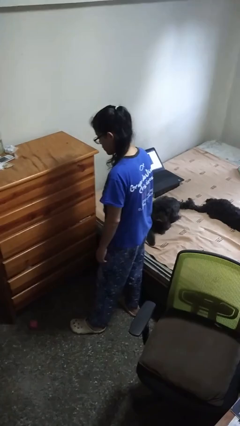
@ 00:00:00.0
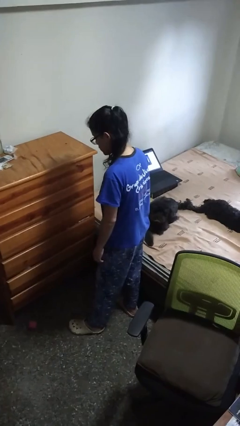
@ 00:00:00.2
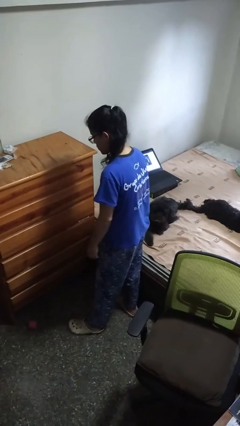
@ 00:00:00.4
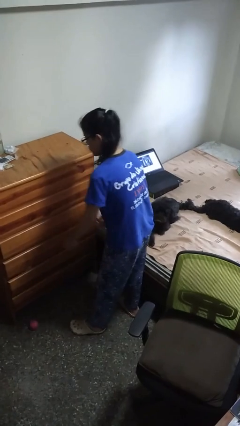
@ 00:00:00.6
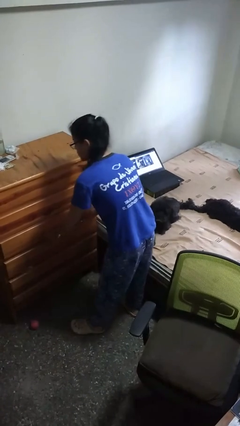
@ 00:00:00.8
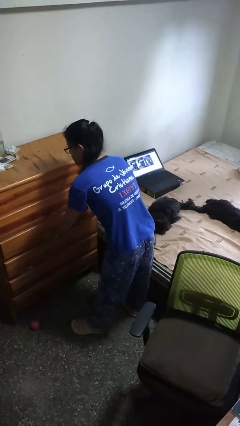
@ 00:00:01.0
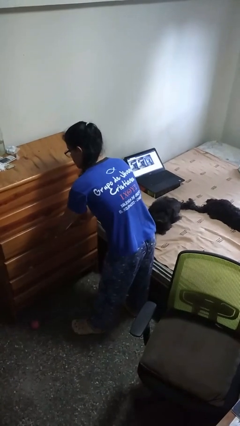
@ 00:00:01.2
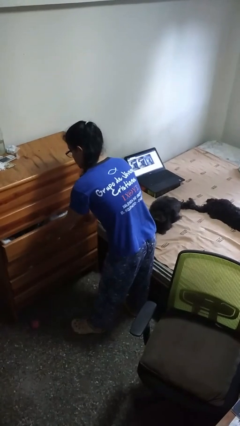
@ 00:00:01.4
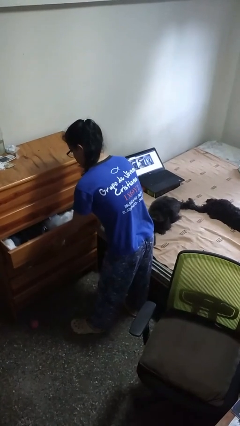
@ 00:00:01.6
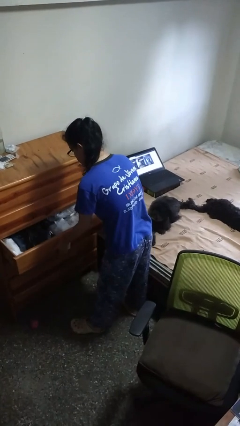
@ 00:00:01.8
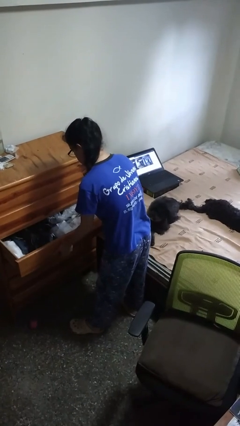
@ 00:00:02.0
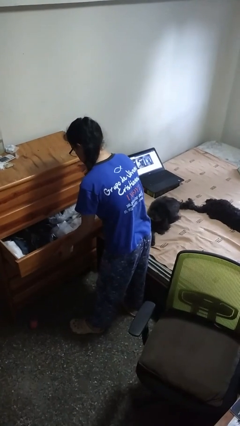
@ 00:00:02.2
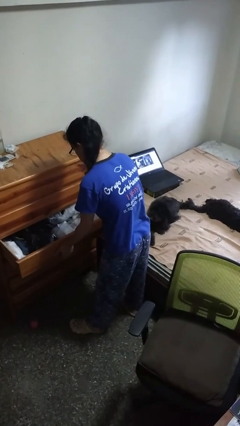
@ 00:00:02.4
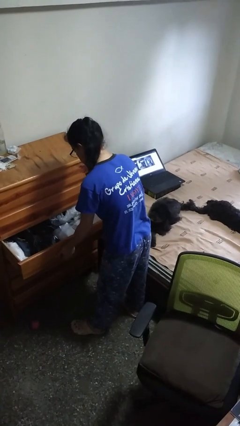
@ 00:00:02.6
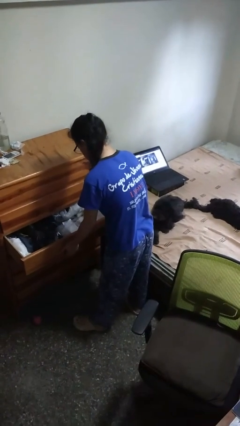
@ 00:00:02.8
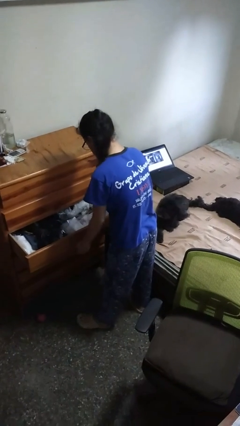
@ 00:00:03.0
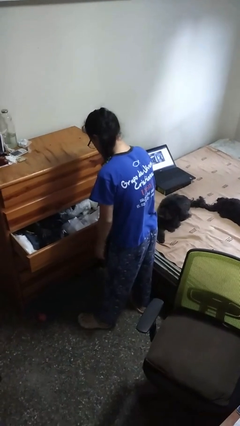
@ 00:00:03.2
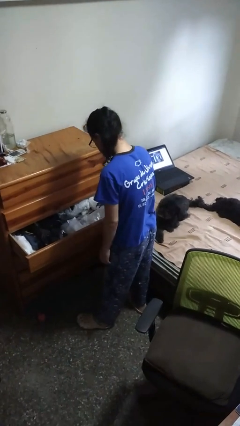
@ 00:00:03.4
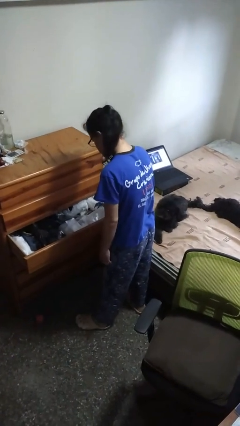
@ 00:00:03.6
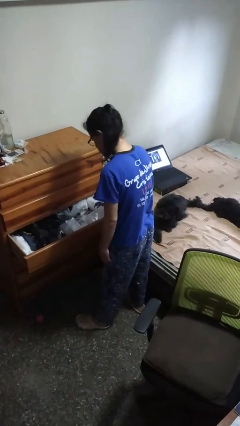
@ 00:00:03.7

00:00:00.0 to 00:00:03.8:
person opens dresser drawer

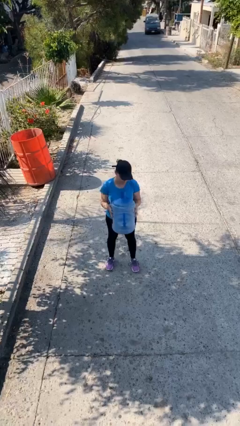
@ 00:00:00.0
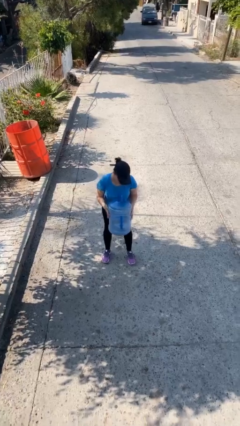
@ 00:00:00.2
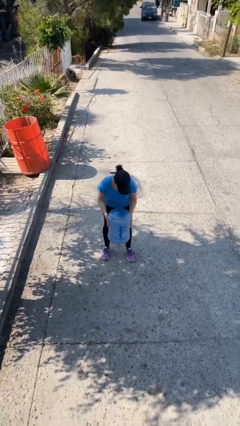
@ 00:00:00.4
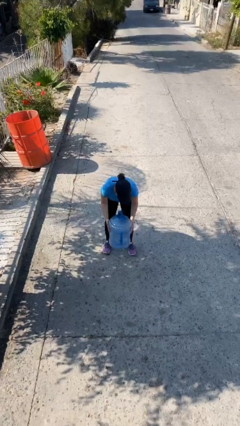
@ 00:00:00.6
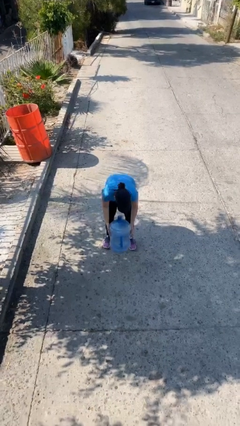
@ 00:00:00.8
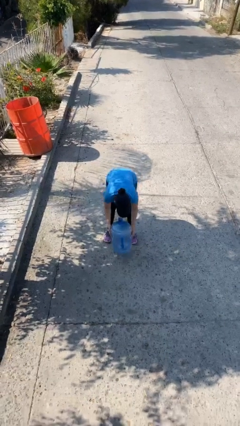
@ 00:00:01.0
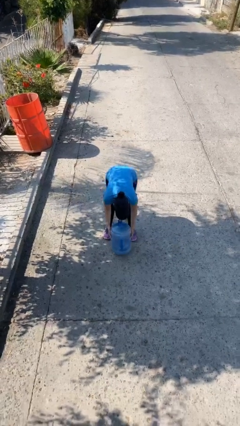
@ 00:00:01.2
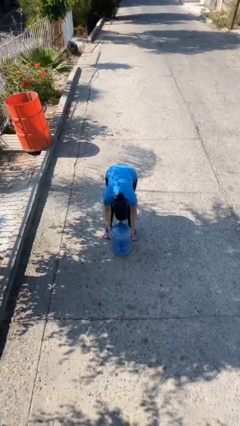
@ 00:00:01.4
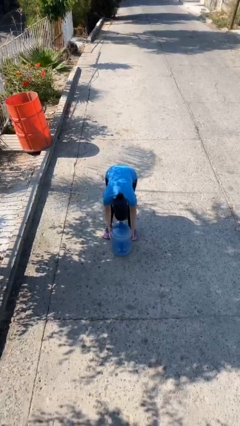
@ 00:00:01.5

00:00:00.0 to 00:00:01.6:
person puts down object on floor

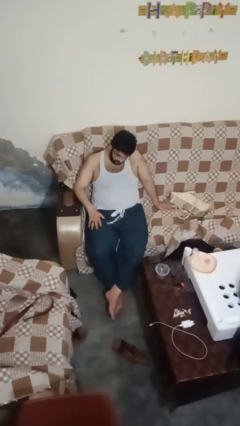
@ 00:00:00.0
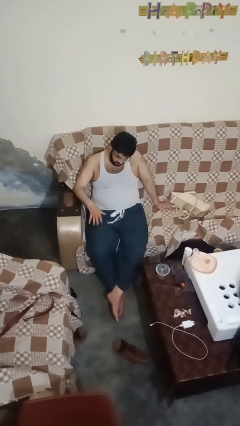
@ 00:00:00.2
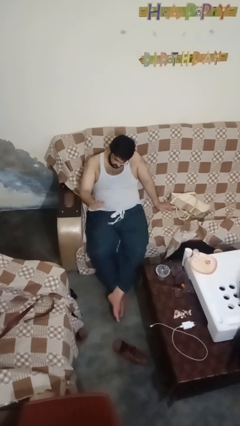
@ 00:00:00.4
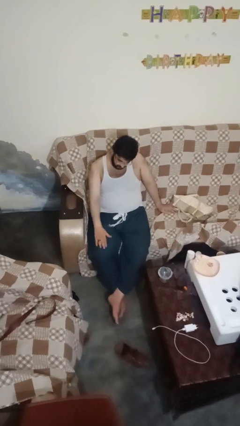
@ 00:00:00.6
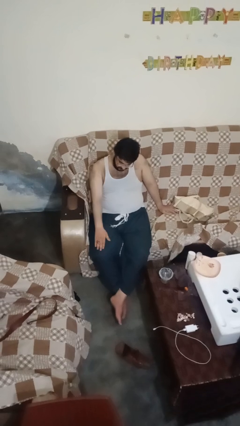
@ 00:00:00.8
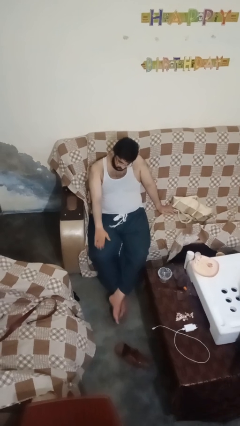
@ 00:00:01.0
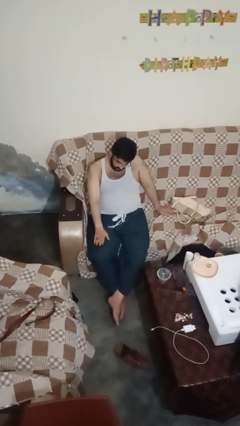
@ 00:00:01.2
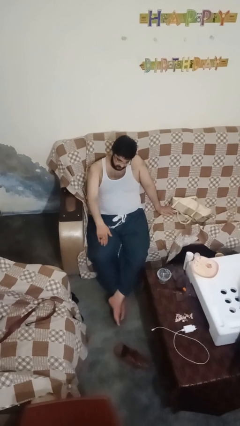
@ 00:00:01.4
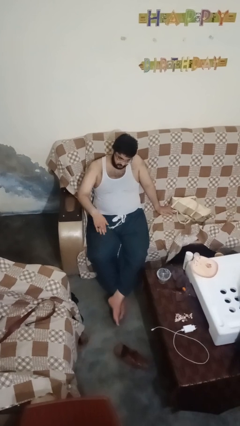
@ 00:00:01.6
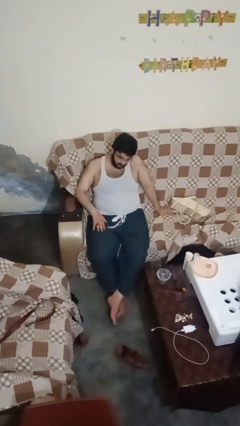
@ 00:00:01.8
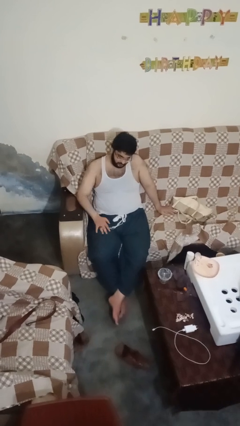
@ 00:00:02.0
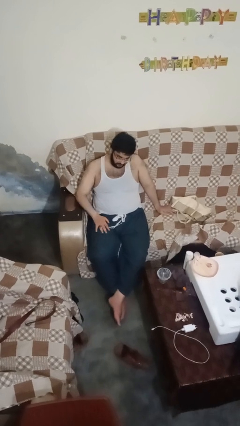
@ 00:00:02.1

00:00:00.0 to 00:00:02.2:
person slaps hands on thighs

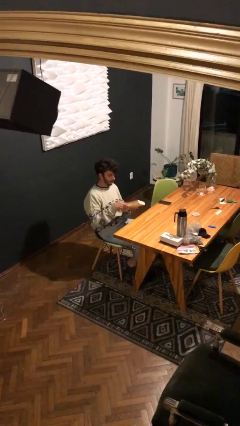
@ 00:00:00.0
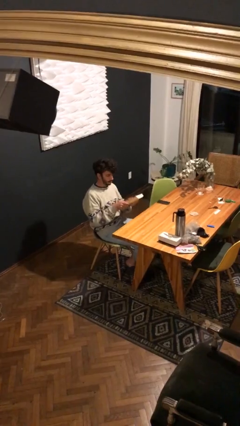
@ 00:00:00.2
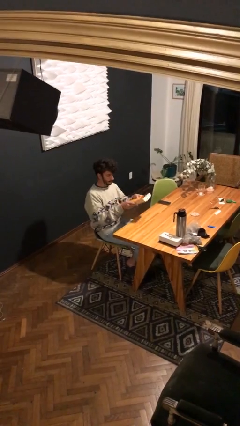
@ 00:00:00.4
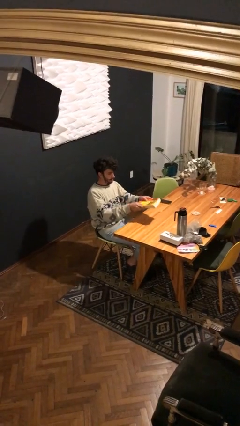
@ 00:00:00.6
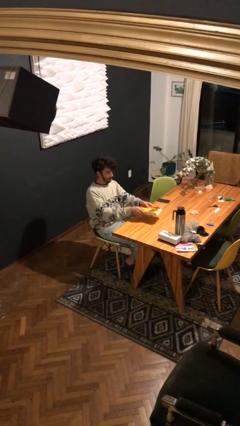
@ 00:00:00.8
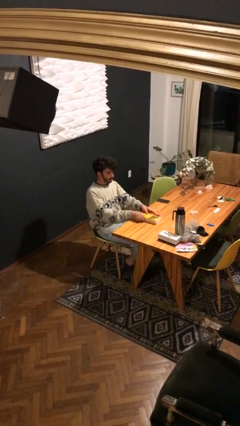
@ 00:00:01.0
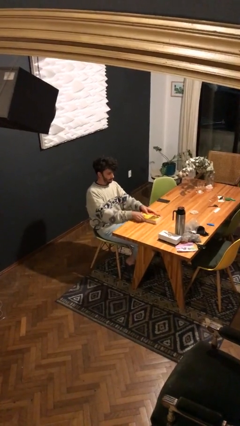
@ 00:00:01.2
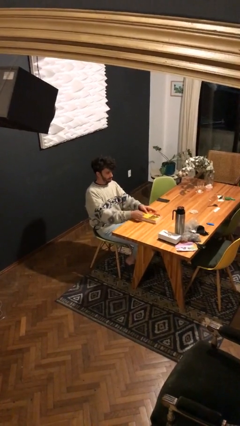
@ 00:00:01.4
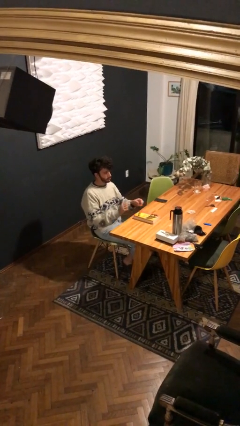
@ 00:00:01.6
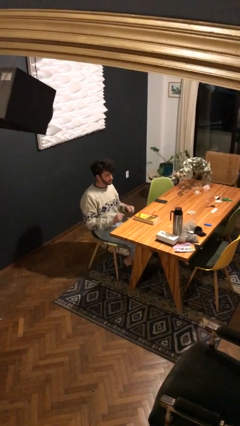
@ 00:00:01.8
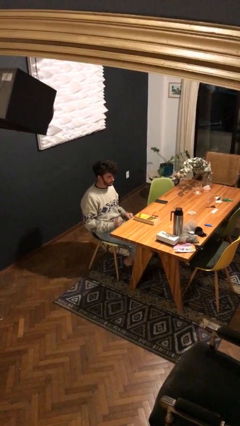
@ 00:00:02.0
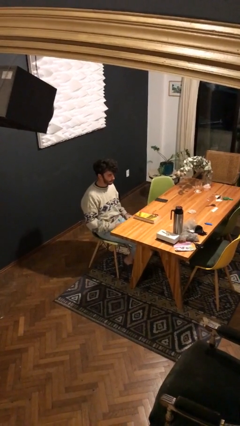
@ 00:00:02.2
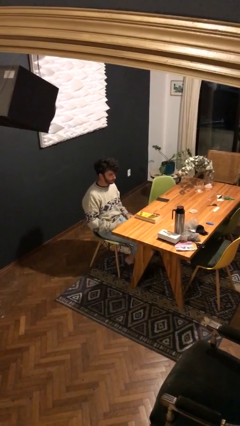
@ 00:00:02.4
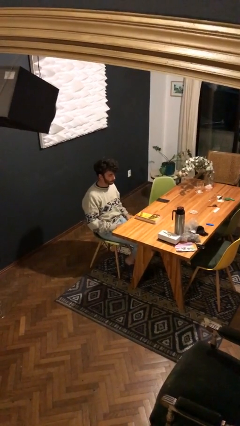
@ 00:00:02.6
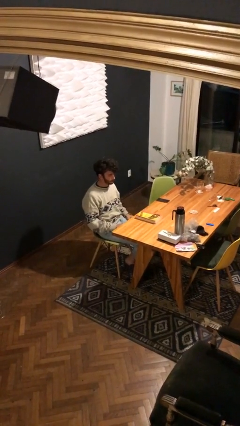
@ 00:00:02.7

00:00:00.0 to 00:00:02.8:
person puts down object on table

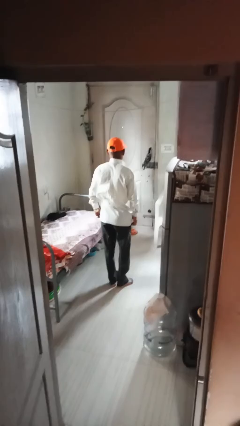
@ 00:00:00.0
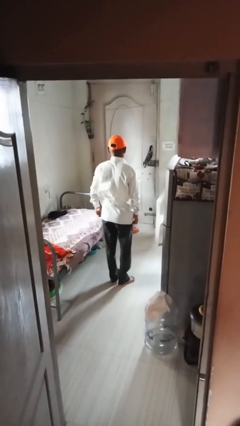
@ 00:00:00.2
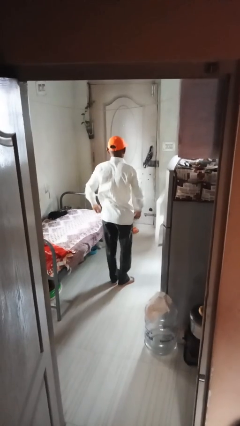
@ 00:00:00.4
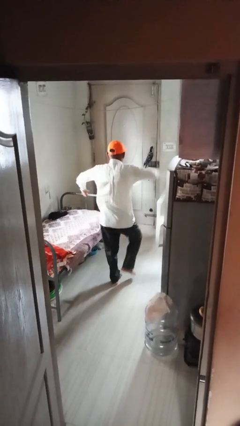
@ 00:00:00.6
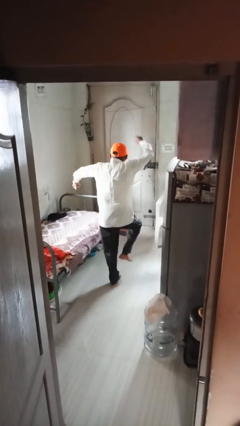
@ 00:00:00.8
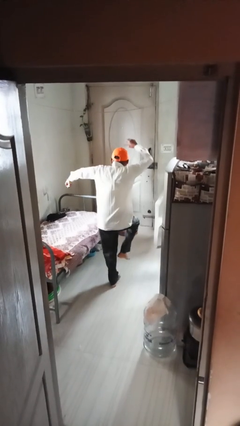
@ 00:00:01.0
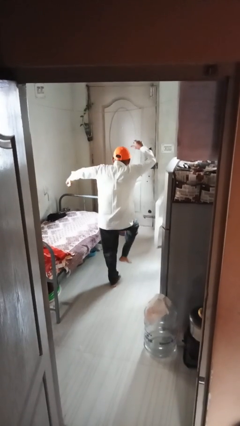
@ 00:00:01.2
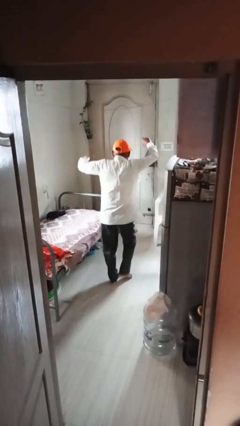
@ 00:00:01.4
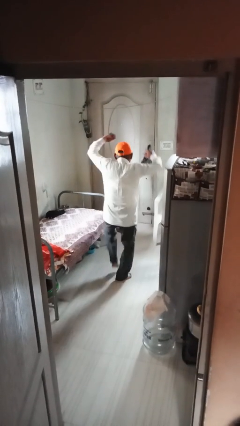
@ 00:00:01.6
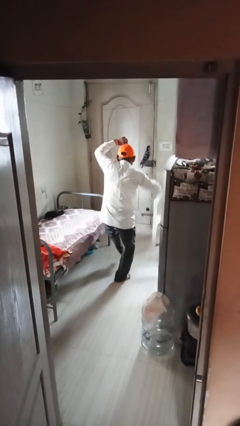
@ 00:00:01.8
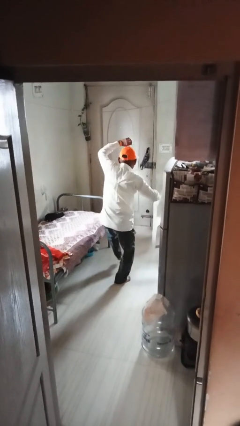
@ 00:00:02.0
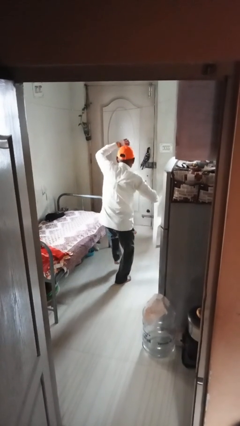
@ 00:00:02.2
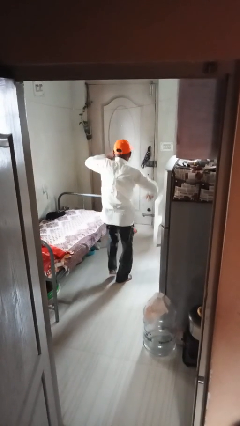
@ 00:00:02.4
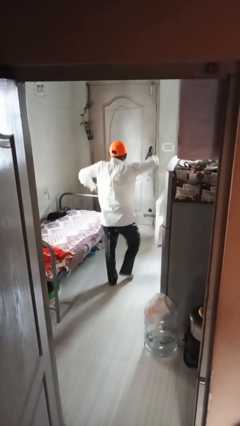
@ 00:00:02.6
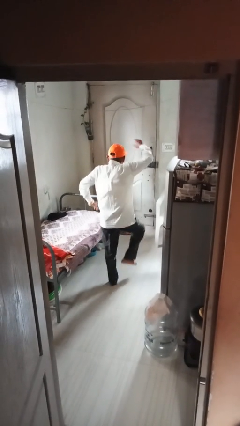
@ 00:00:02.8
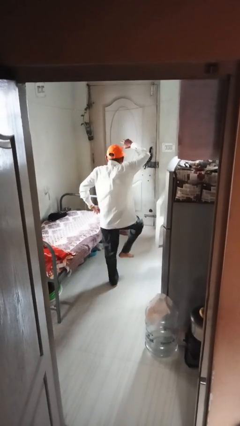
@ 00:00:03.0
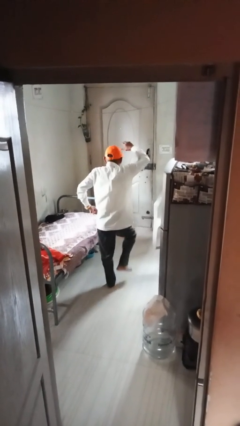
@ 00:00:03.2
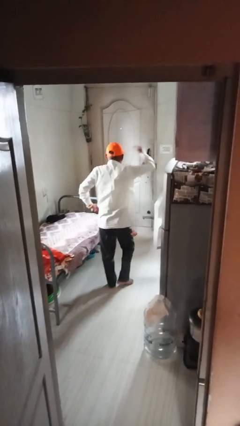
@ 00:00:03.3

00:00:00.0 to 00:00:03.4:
person dances in place

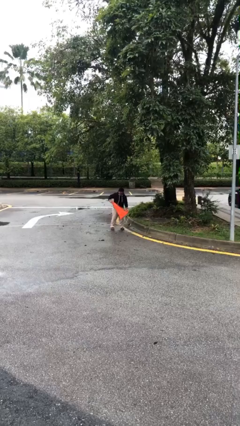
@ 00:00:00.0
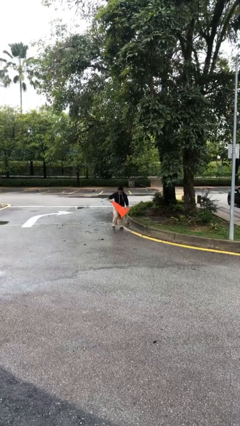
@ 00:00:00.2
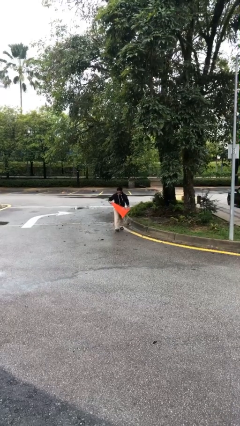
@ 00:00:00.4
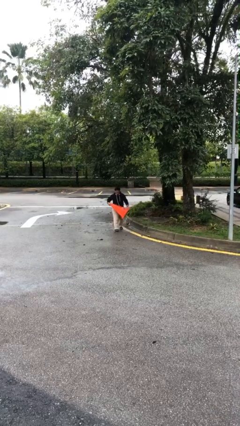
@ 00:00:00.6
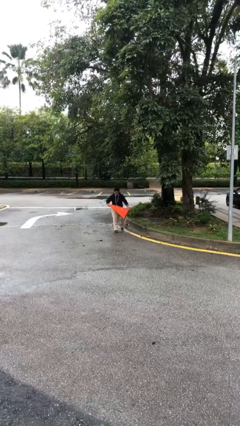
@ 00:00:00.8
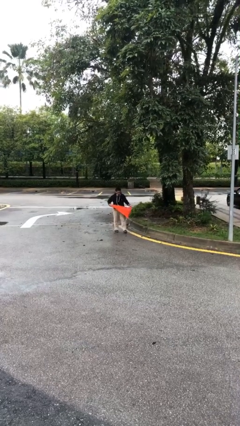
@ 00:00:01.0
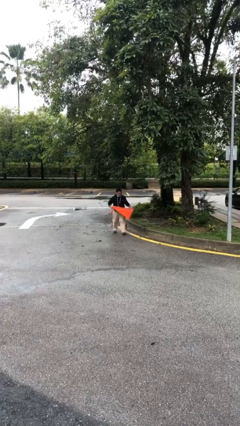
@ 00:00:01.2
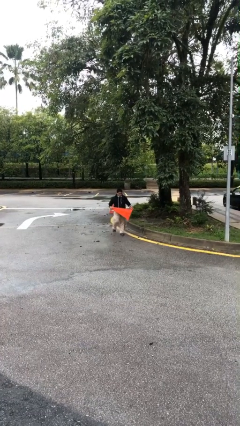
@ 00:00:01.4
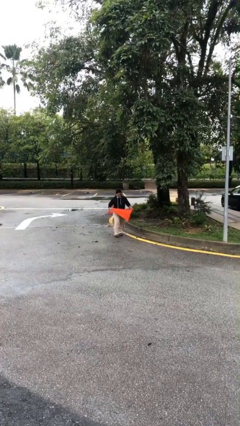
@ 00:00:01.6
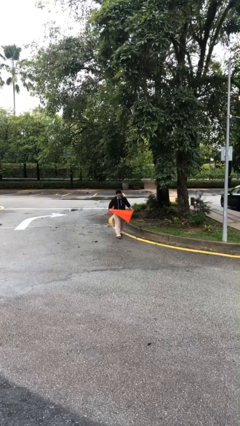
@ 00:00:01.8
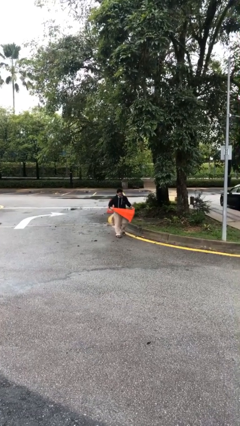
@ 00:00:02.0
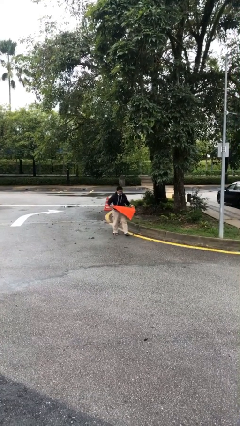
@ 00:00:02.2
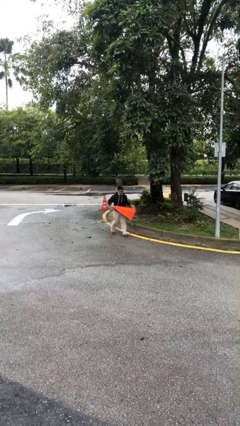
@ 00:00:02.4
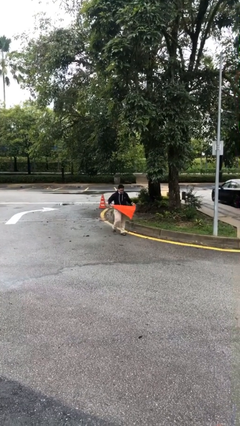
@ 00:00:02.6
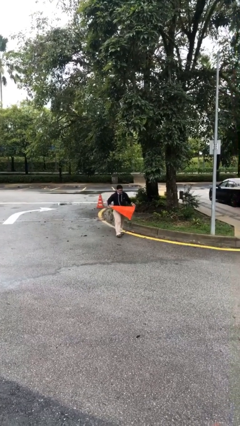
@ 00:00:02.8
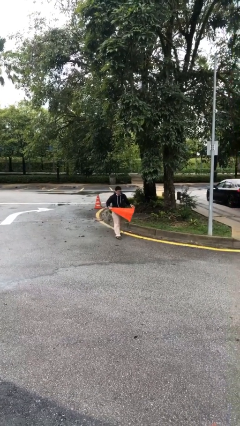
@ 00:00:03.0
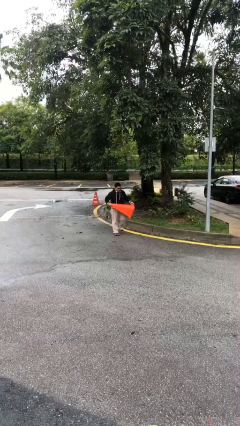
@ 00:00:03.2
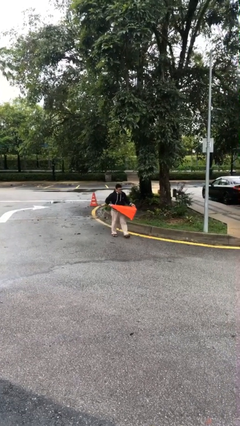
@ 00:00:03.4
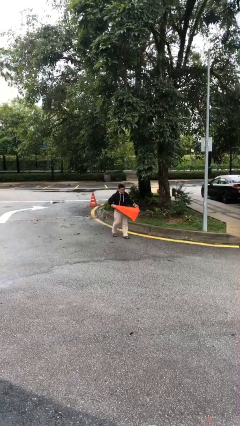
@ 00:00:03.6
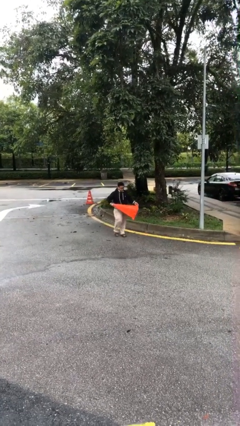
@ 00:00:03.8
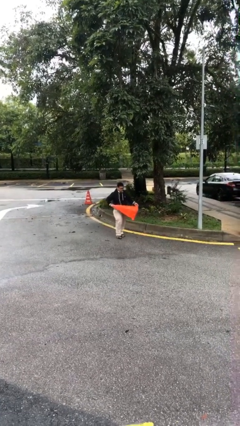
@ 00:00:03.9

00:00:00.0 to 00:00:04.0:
person carries heavy object
